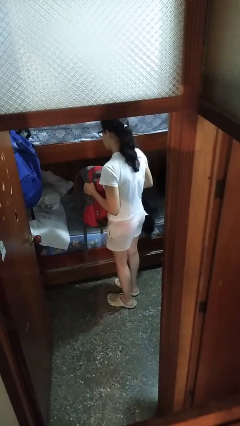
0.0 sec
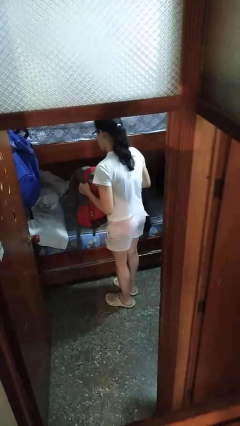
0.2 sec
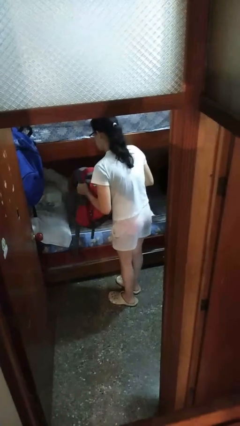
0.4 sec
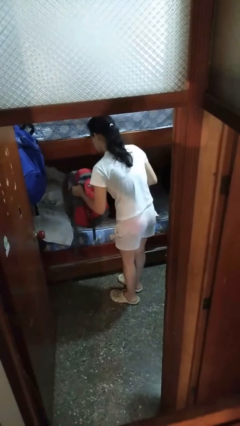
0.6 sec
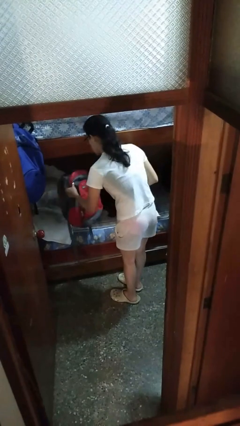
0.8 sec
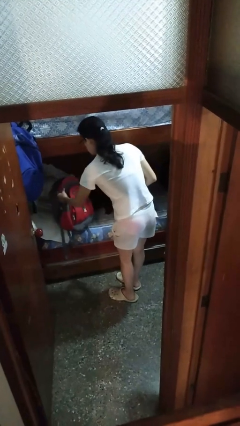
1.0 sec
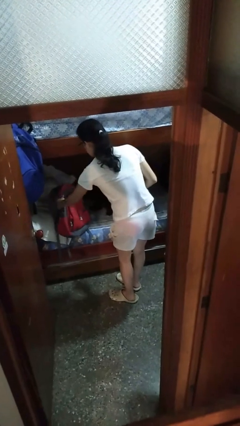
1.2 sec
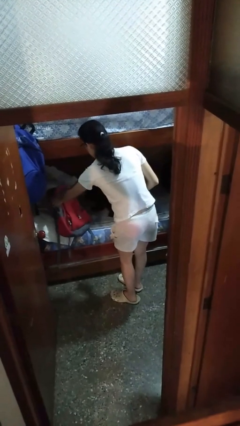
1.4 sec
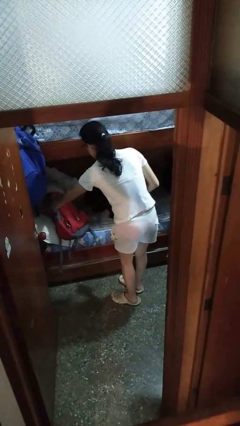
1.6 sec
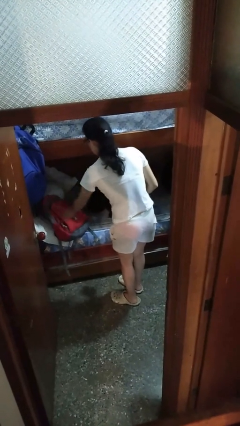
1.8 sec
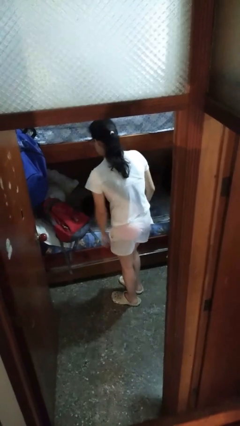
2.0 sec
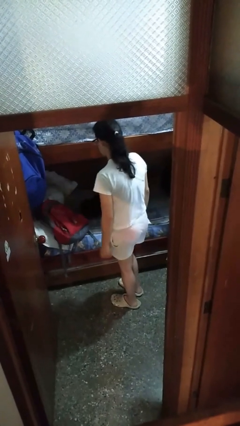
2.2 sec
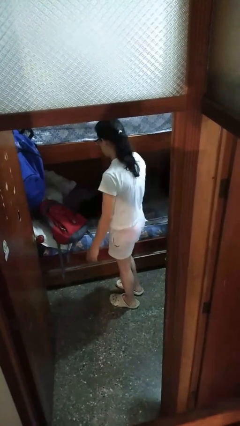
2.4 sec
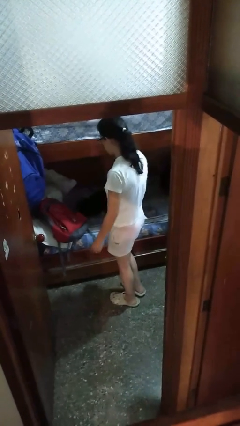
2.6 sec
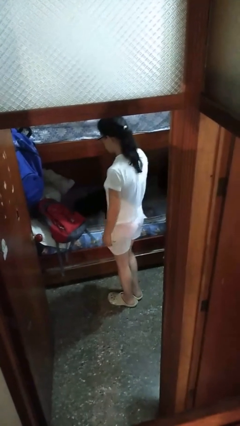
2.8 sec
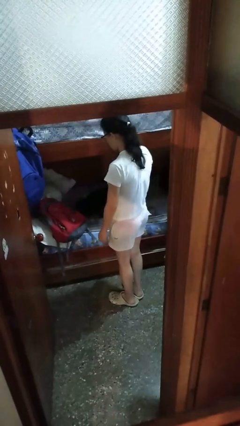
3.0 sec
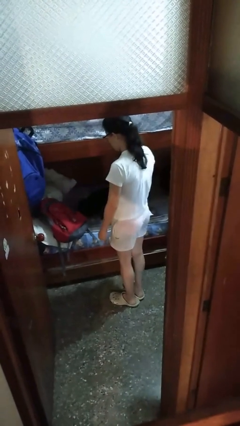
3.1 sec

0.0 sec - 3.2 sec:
person puts down object on bed

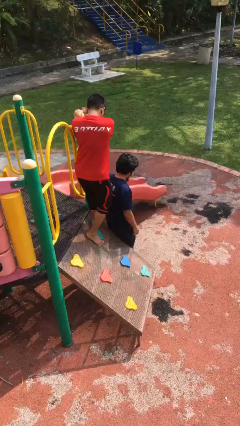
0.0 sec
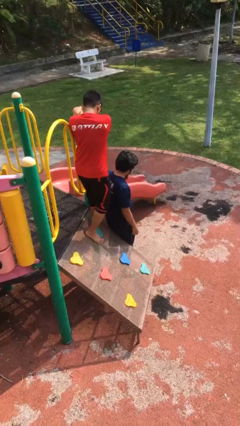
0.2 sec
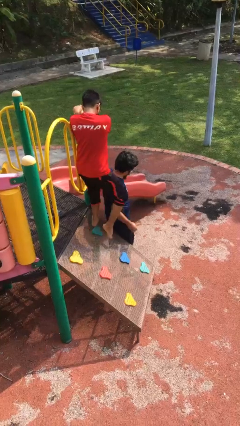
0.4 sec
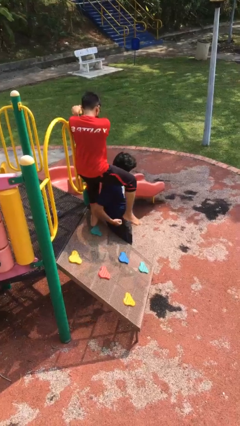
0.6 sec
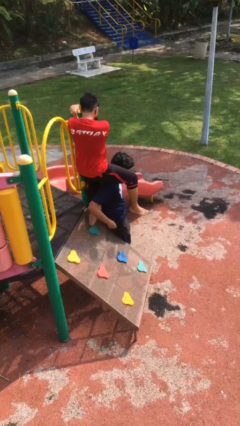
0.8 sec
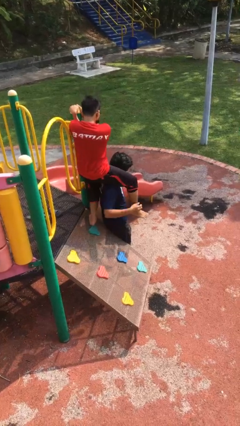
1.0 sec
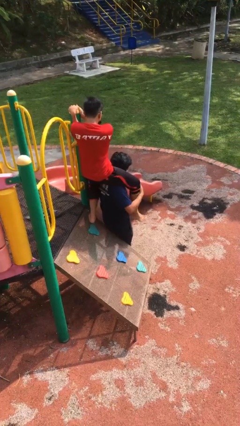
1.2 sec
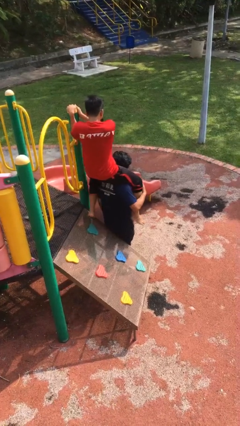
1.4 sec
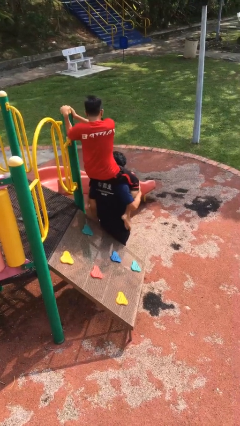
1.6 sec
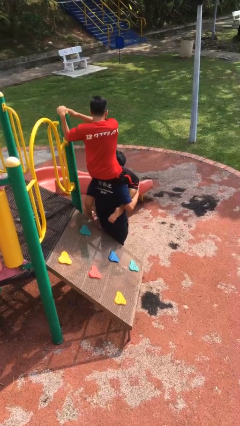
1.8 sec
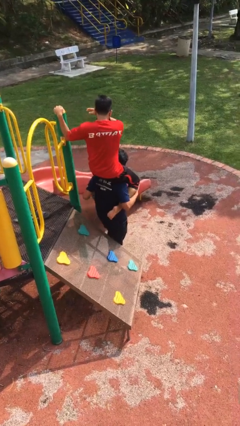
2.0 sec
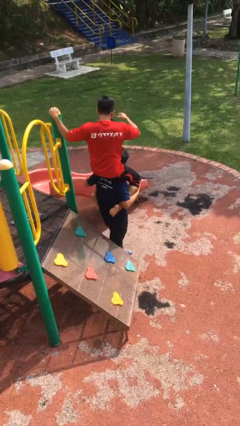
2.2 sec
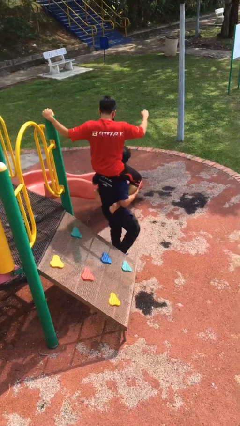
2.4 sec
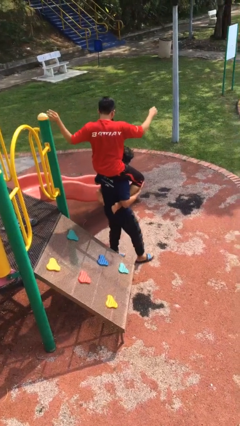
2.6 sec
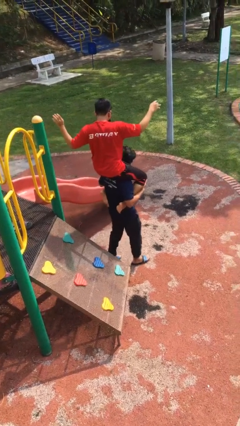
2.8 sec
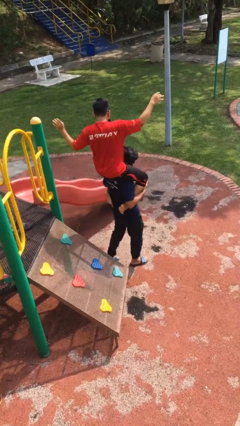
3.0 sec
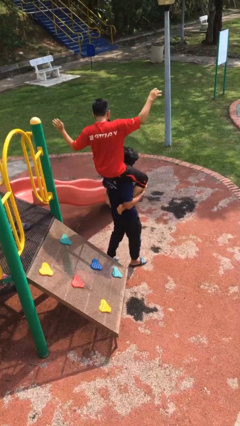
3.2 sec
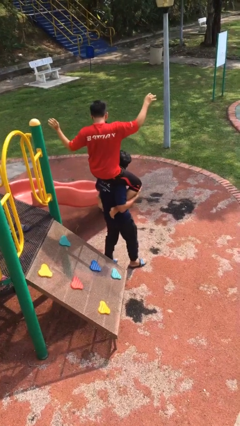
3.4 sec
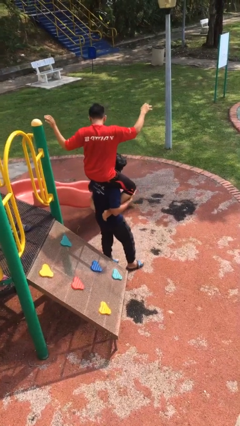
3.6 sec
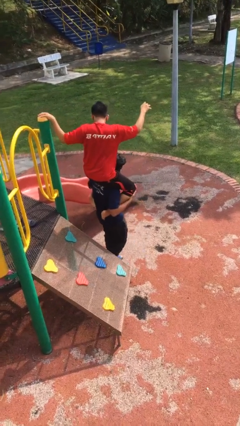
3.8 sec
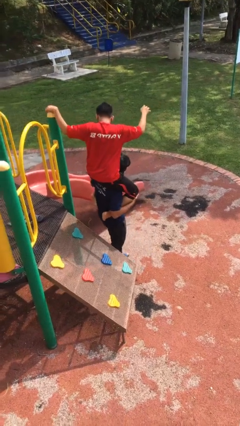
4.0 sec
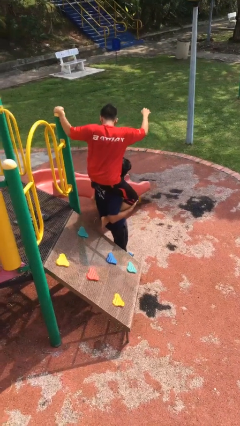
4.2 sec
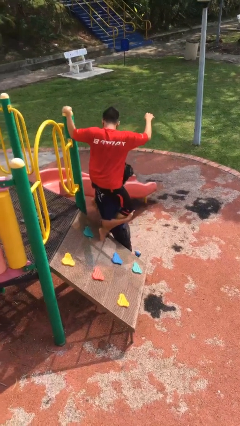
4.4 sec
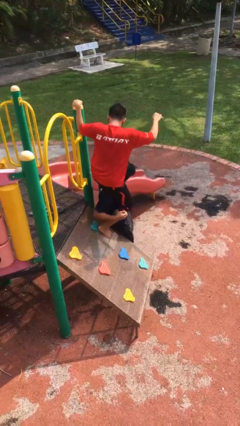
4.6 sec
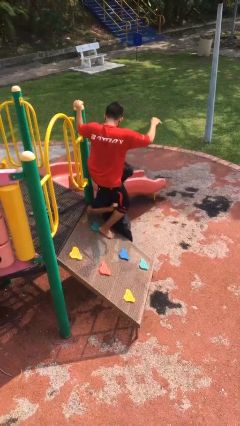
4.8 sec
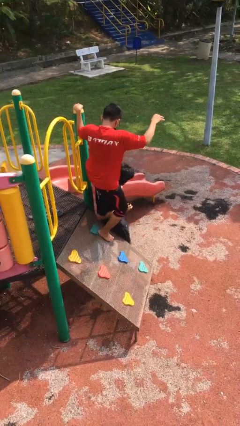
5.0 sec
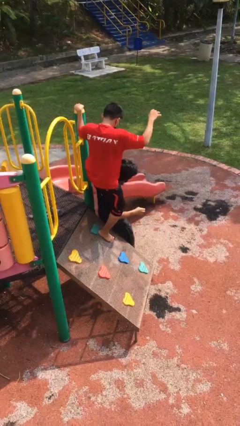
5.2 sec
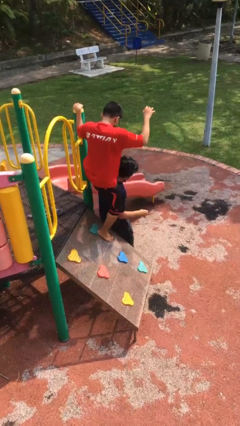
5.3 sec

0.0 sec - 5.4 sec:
person carries person on shoulders

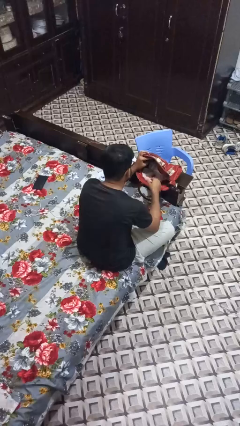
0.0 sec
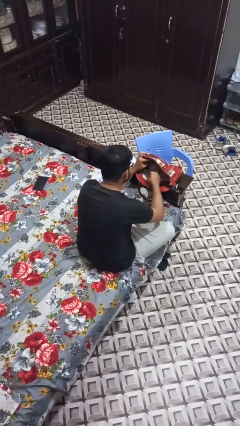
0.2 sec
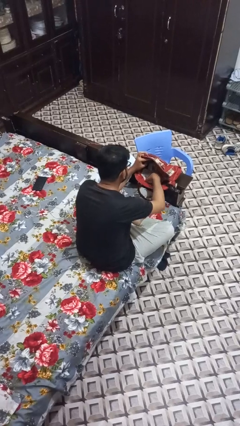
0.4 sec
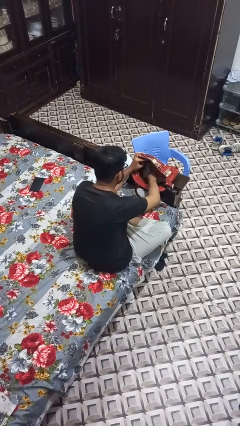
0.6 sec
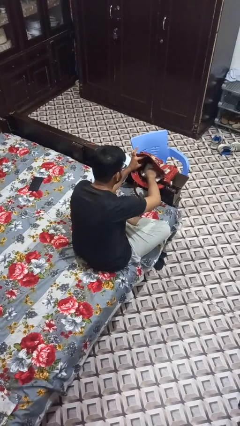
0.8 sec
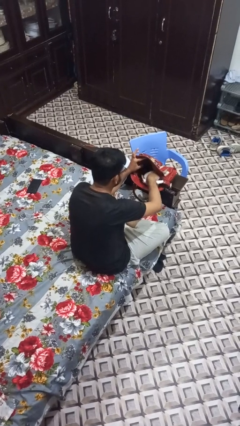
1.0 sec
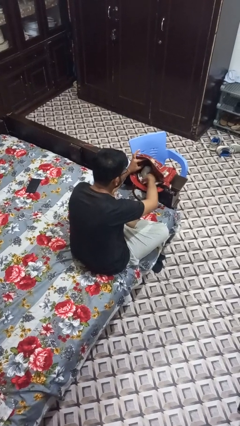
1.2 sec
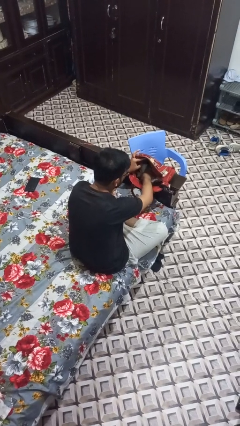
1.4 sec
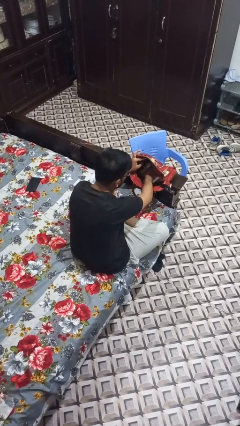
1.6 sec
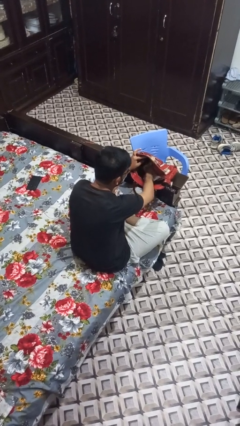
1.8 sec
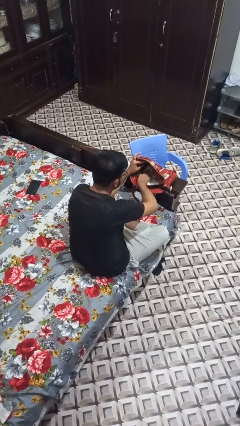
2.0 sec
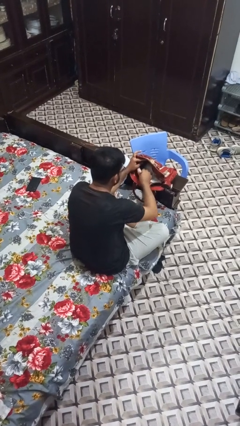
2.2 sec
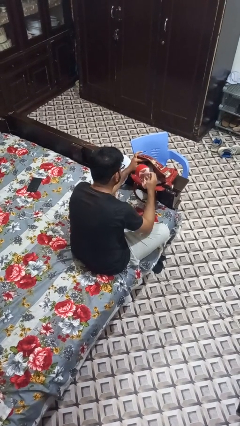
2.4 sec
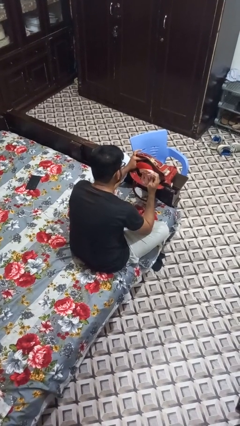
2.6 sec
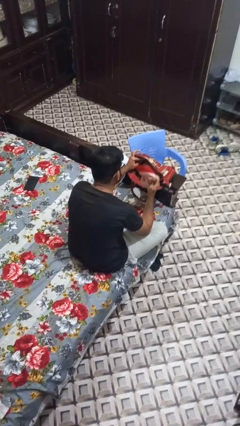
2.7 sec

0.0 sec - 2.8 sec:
person searches in purse

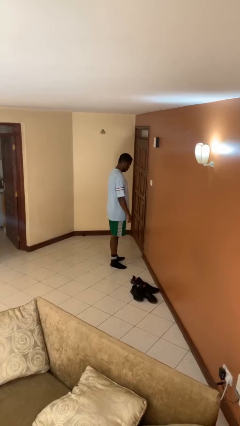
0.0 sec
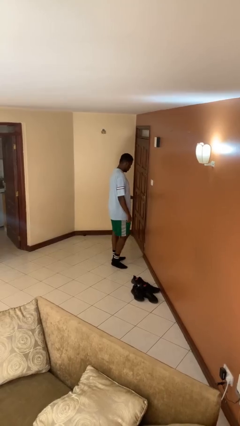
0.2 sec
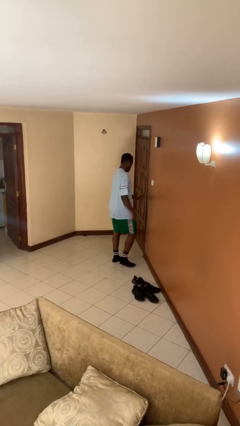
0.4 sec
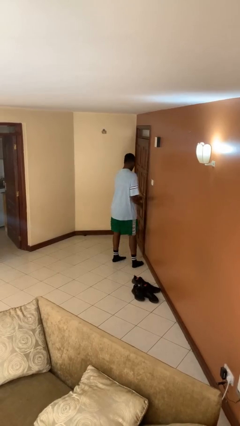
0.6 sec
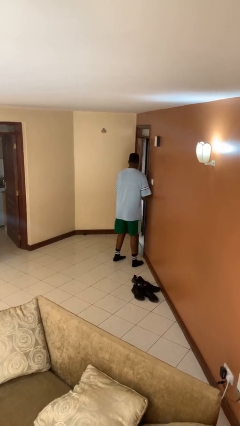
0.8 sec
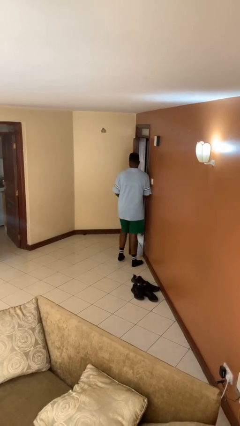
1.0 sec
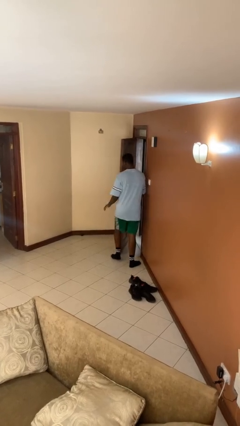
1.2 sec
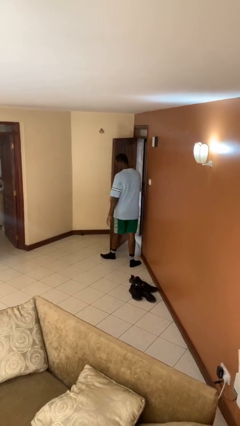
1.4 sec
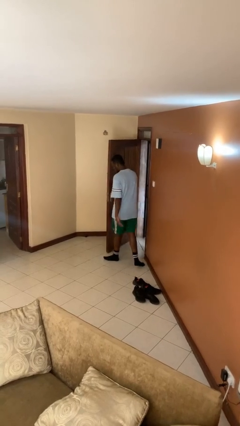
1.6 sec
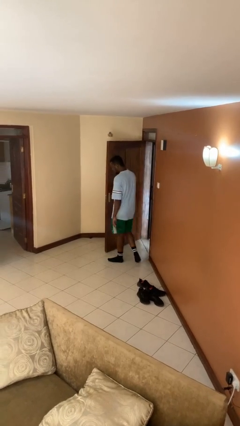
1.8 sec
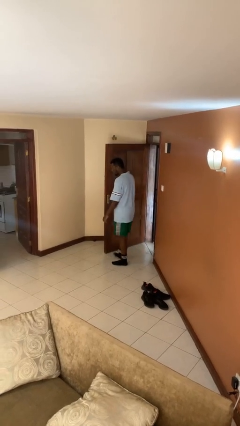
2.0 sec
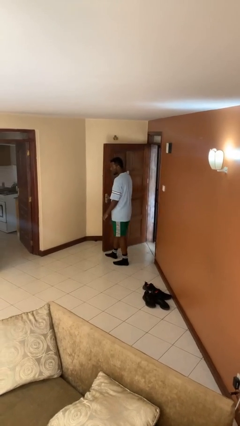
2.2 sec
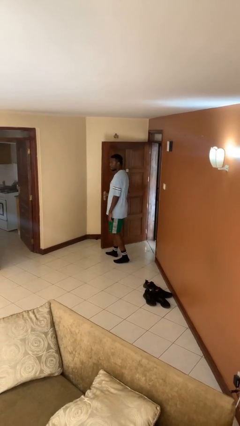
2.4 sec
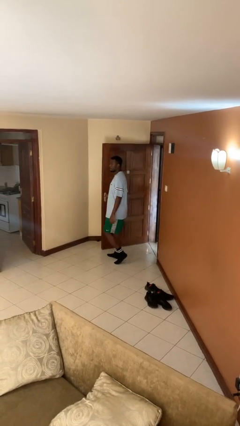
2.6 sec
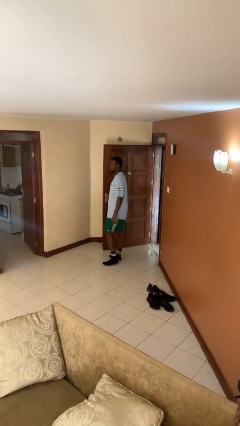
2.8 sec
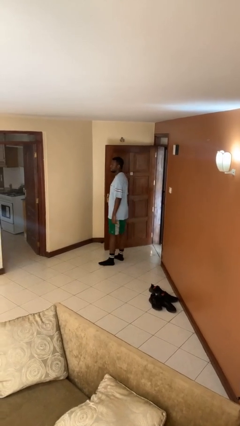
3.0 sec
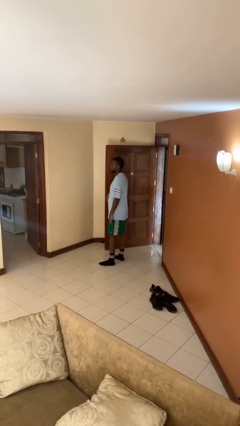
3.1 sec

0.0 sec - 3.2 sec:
person opens facility door

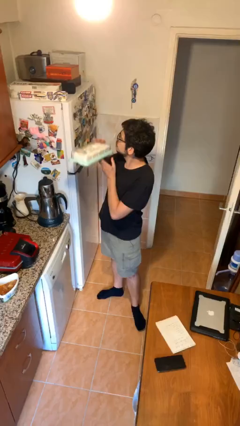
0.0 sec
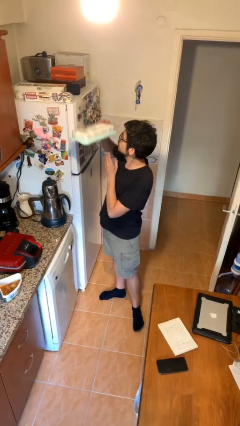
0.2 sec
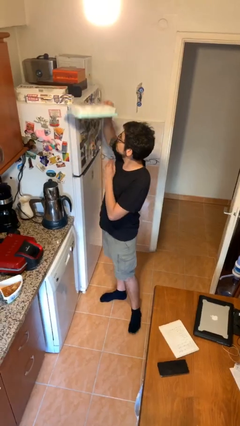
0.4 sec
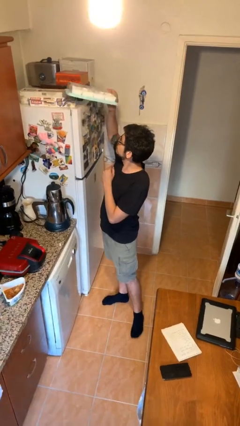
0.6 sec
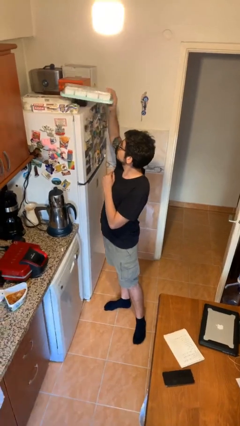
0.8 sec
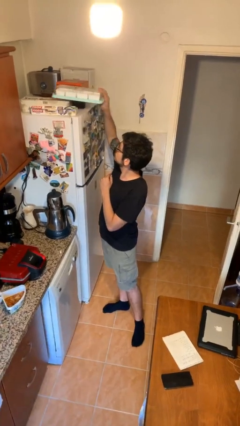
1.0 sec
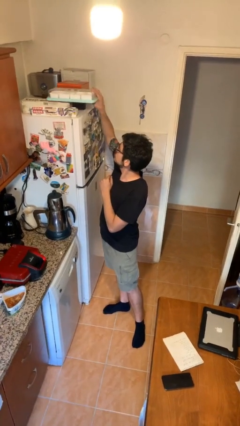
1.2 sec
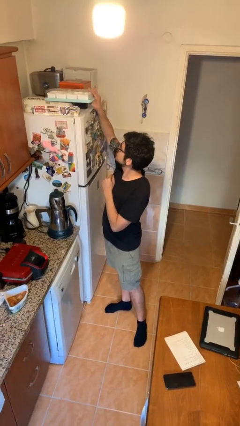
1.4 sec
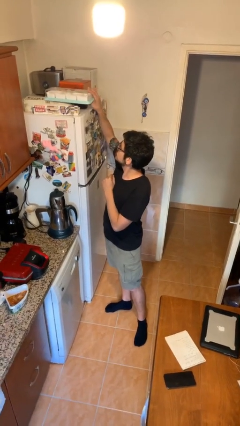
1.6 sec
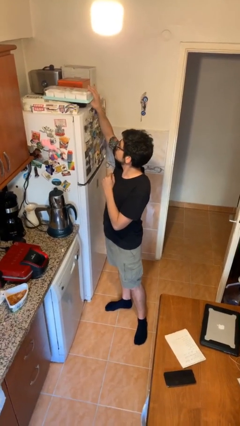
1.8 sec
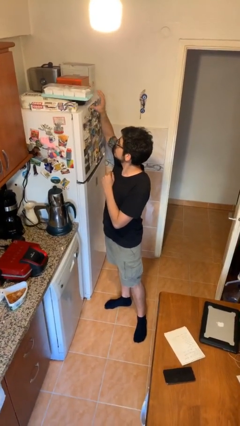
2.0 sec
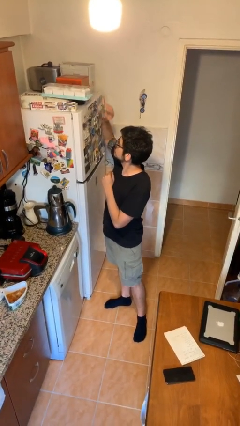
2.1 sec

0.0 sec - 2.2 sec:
person puts down object on shelf

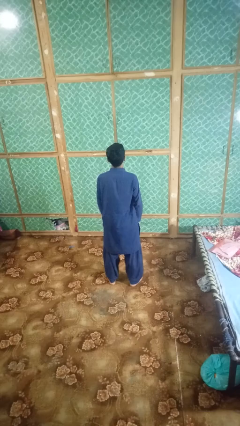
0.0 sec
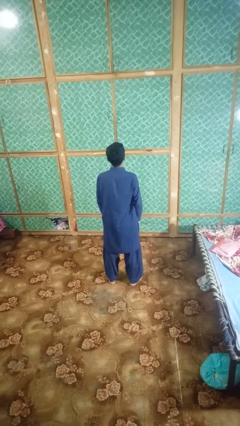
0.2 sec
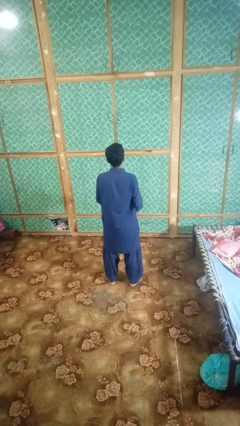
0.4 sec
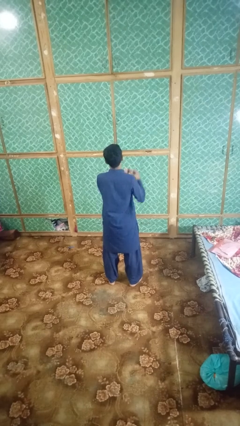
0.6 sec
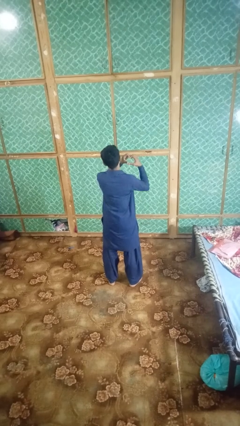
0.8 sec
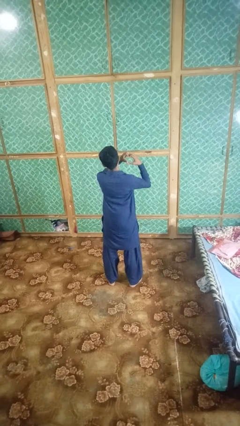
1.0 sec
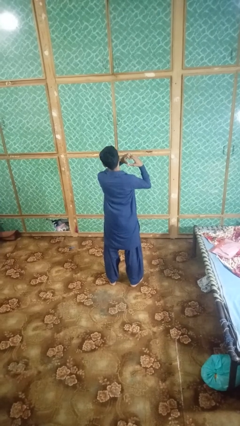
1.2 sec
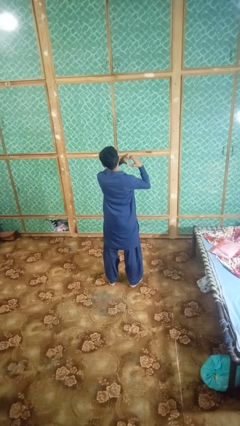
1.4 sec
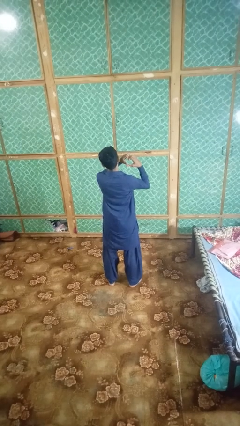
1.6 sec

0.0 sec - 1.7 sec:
person gestures heart
